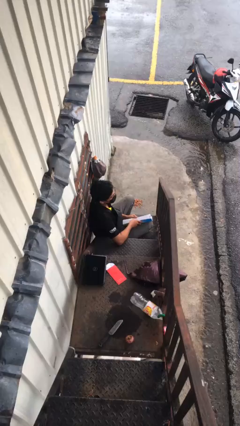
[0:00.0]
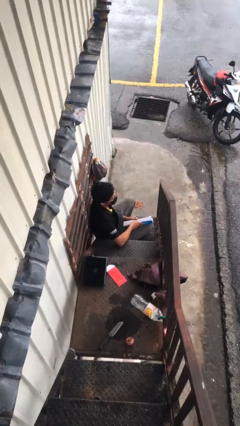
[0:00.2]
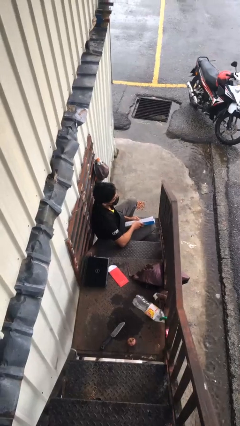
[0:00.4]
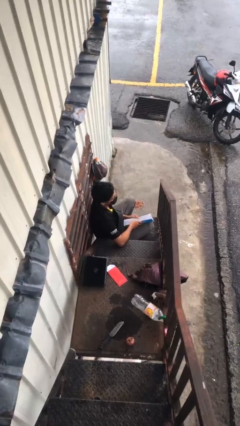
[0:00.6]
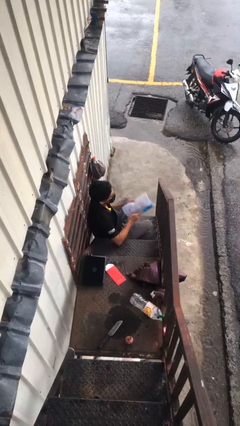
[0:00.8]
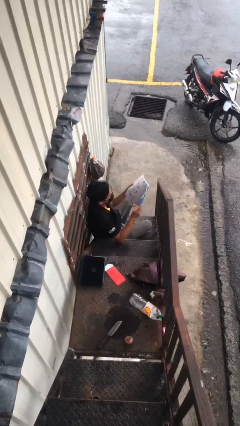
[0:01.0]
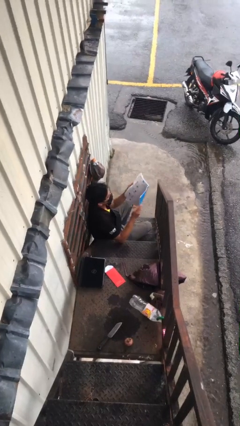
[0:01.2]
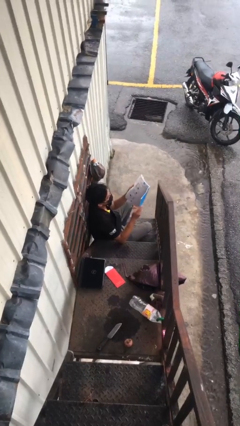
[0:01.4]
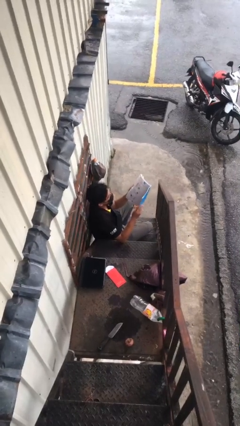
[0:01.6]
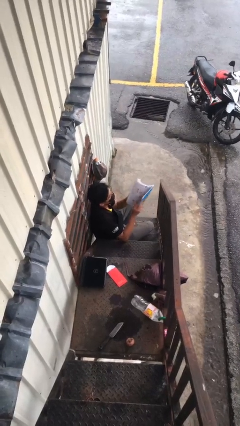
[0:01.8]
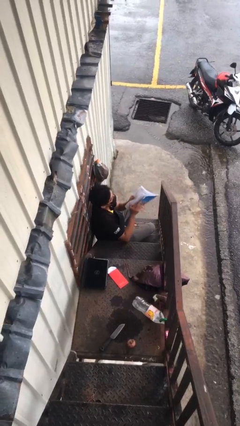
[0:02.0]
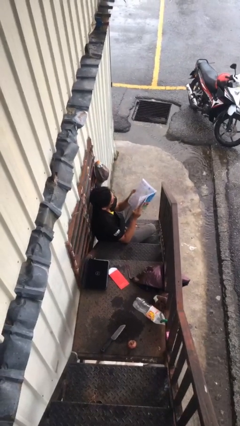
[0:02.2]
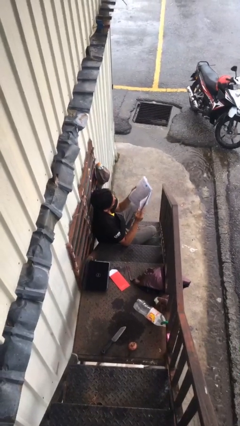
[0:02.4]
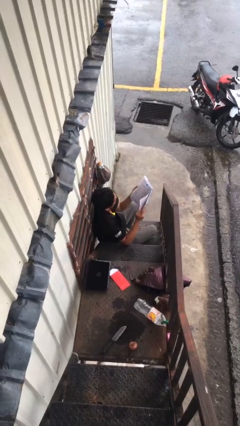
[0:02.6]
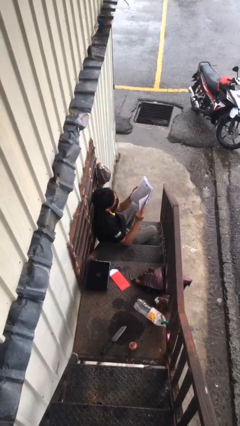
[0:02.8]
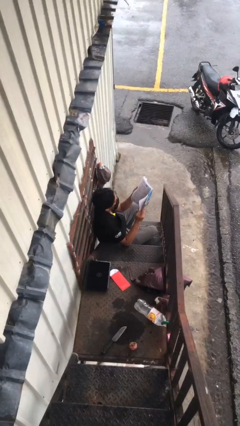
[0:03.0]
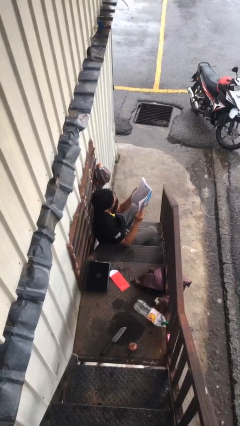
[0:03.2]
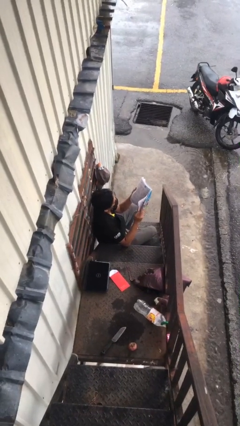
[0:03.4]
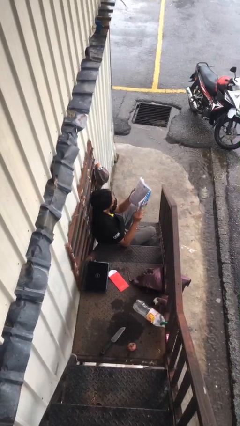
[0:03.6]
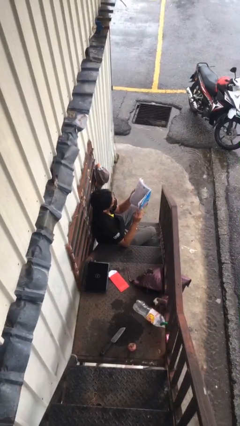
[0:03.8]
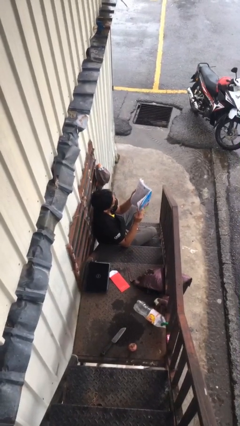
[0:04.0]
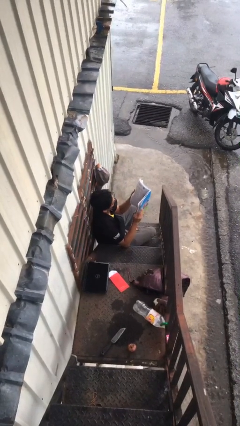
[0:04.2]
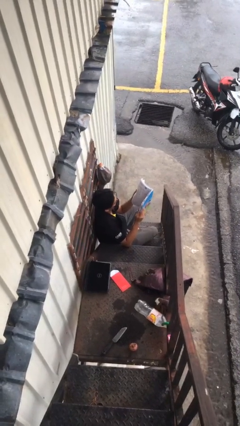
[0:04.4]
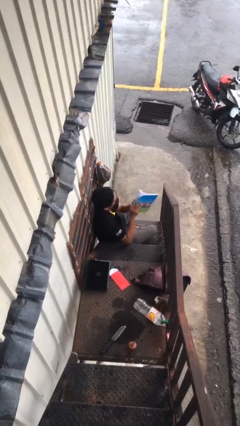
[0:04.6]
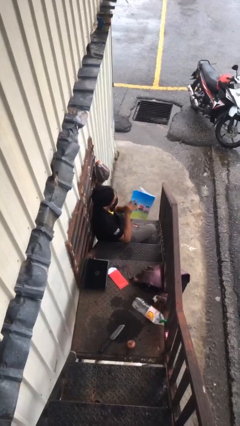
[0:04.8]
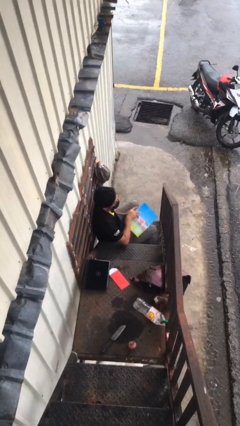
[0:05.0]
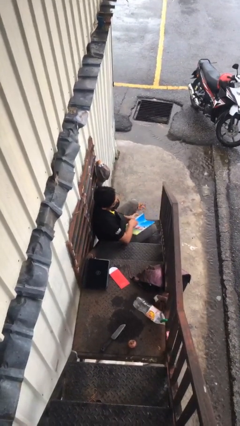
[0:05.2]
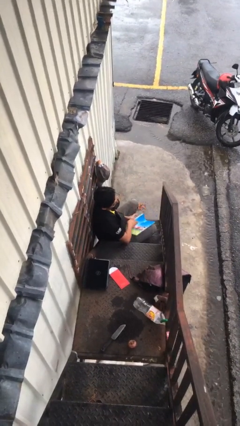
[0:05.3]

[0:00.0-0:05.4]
person reads document

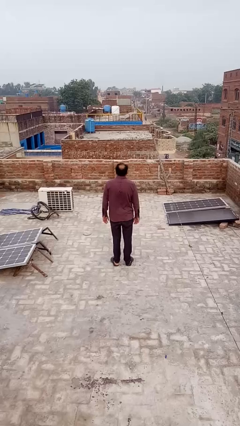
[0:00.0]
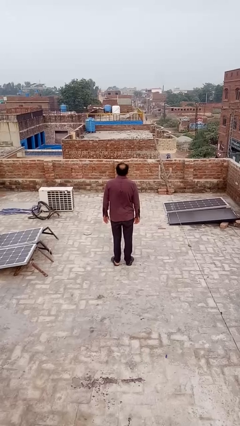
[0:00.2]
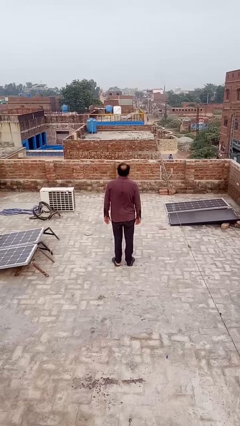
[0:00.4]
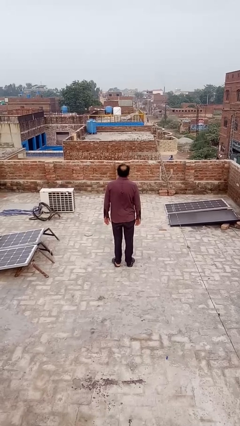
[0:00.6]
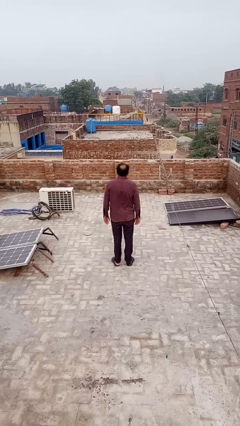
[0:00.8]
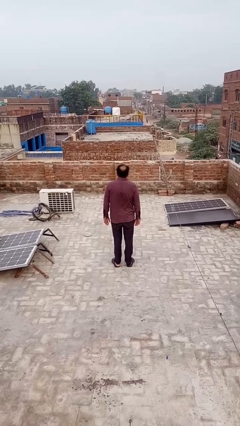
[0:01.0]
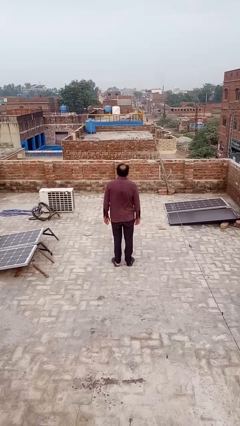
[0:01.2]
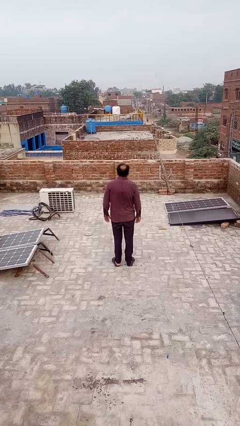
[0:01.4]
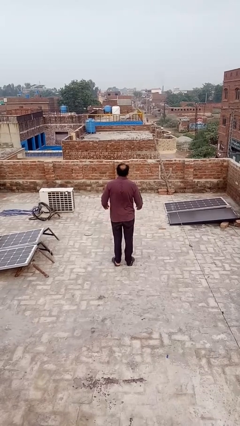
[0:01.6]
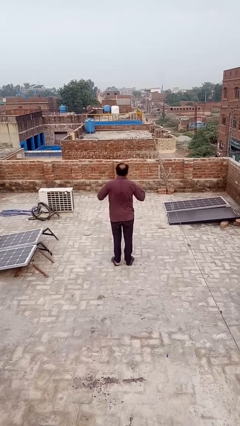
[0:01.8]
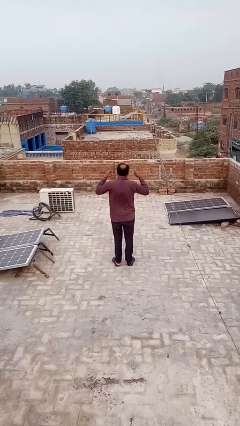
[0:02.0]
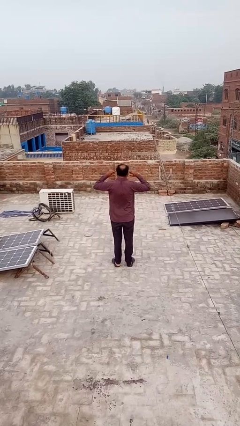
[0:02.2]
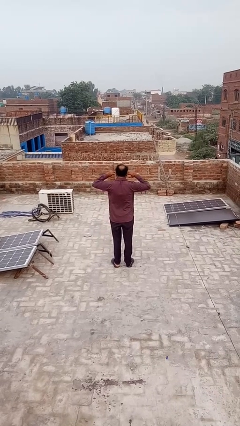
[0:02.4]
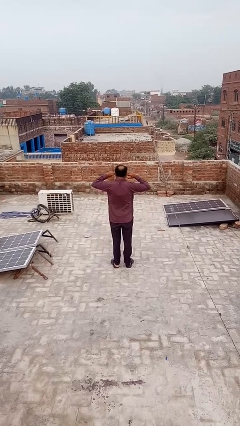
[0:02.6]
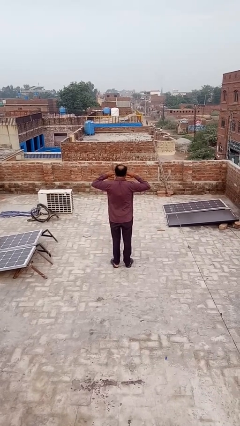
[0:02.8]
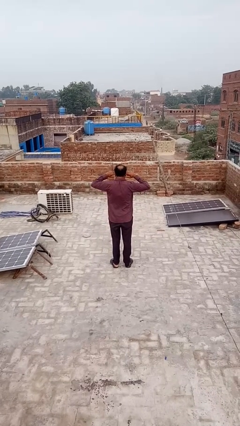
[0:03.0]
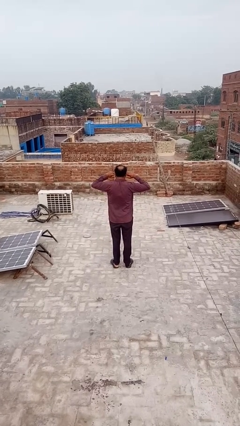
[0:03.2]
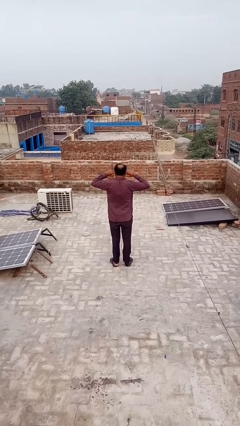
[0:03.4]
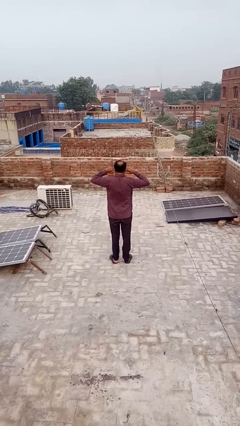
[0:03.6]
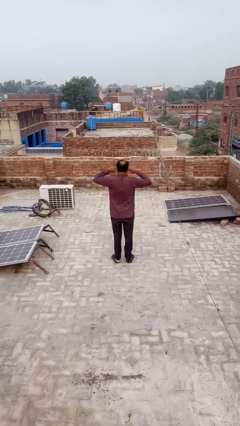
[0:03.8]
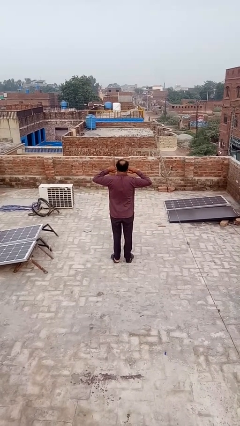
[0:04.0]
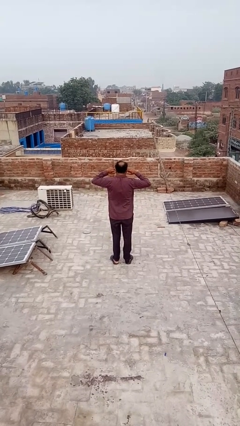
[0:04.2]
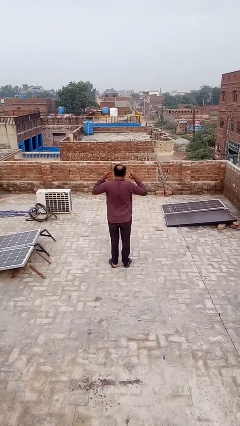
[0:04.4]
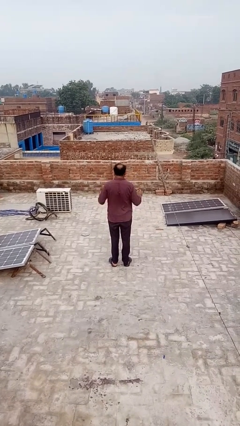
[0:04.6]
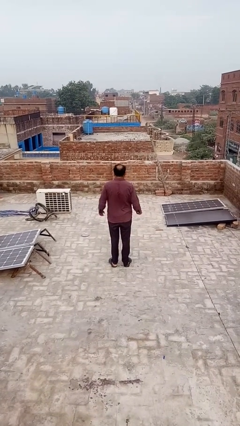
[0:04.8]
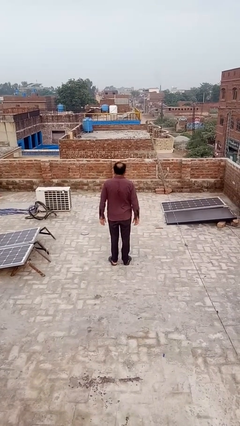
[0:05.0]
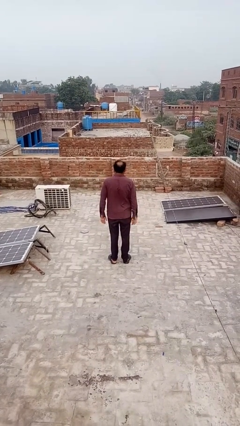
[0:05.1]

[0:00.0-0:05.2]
person puts fingers in ear

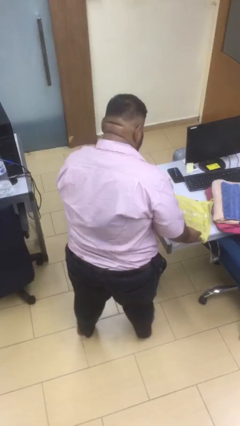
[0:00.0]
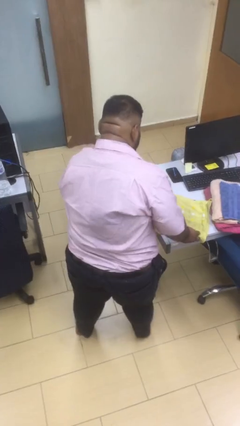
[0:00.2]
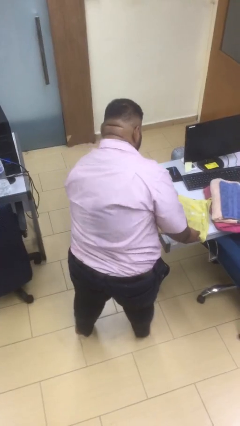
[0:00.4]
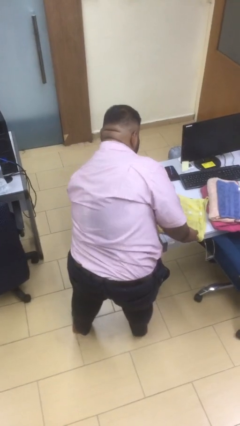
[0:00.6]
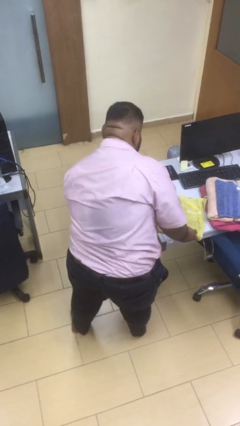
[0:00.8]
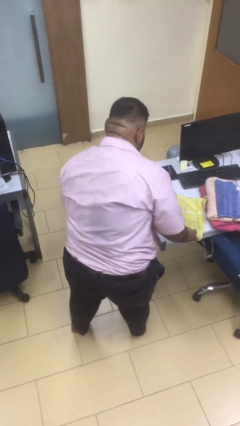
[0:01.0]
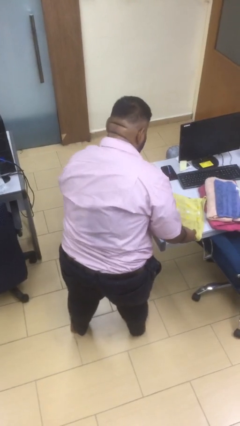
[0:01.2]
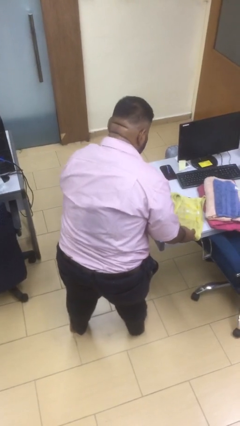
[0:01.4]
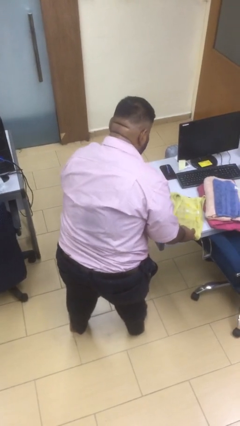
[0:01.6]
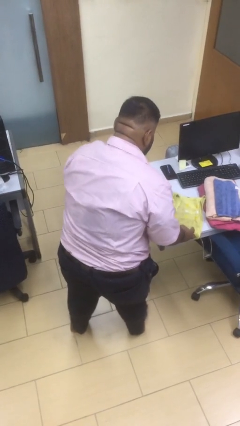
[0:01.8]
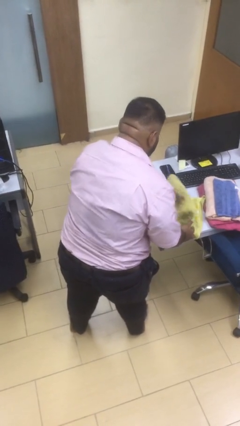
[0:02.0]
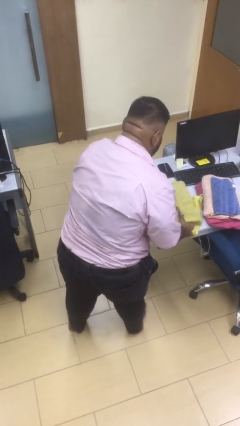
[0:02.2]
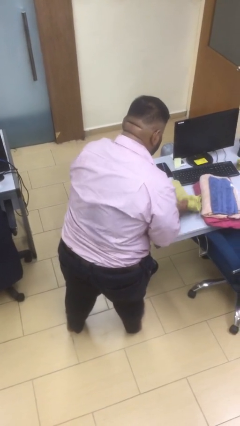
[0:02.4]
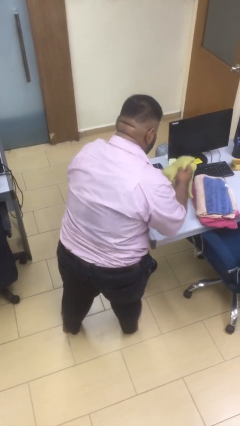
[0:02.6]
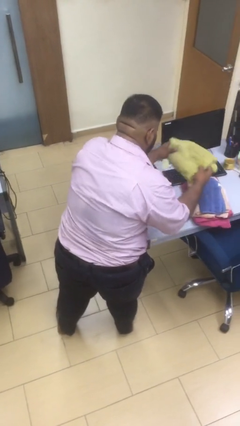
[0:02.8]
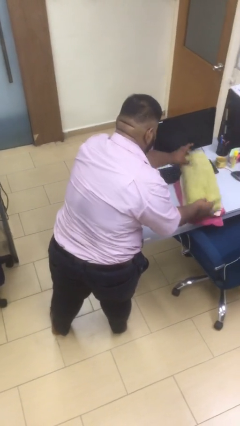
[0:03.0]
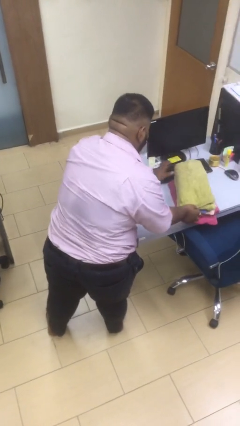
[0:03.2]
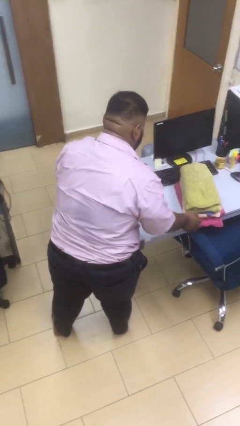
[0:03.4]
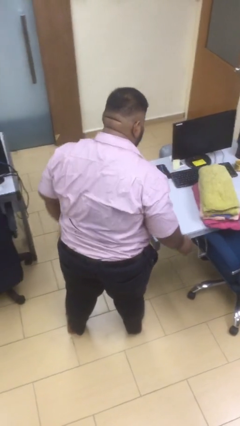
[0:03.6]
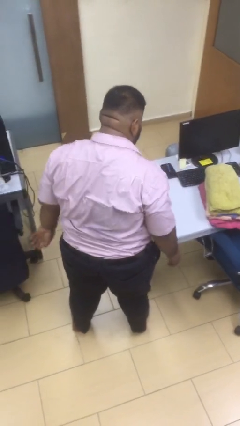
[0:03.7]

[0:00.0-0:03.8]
person folds towel

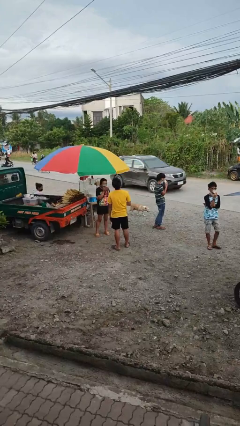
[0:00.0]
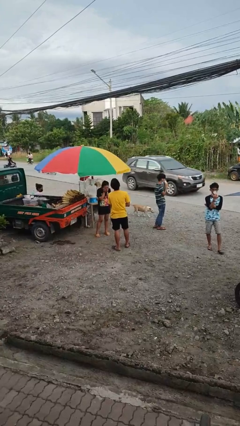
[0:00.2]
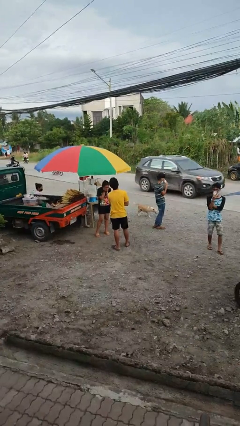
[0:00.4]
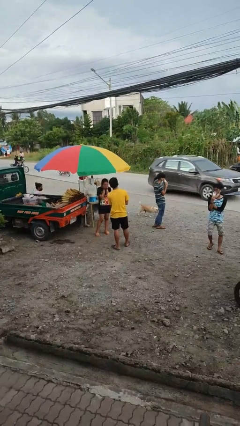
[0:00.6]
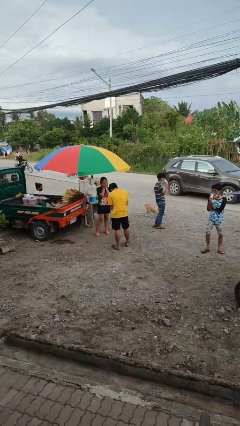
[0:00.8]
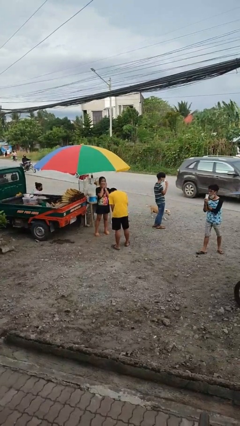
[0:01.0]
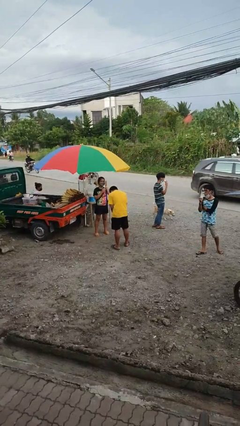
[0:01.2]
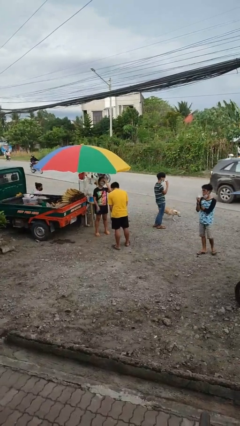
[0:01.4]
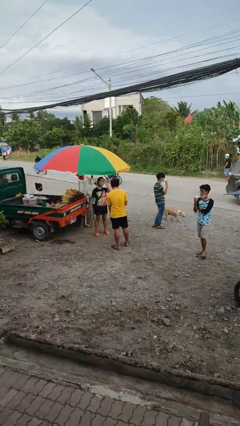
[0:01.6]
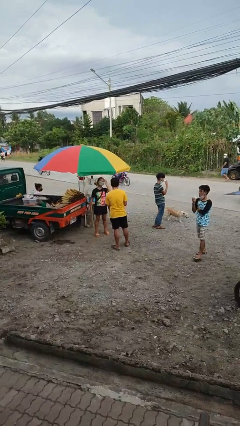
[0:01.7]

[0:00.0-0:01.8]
person laughs with person

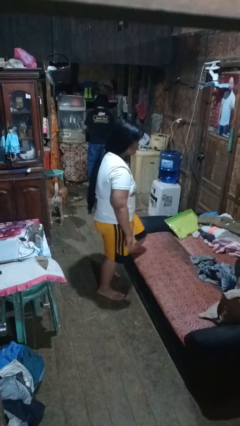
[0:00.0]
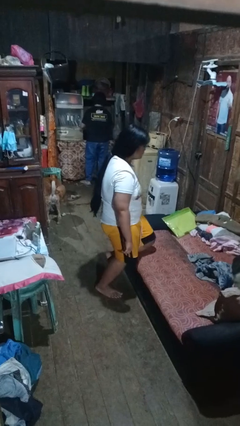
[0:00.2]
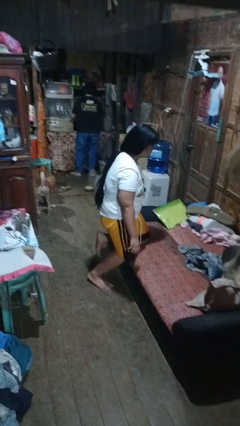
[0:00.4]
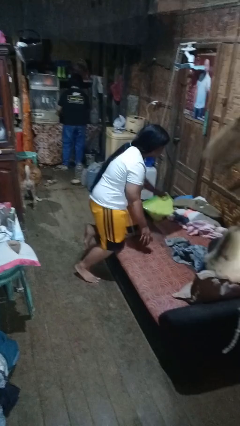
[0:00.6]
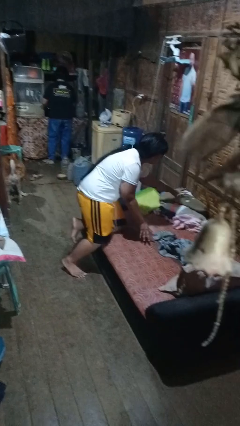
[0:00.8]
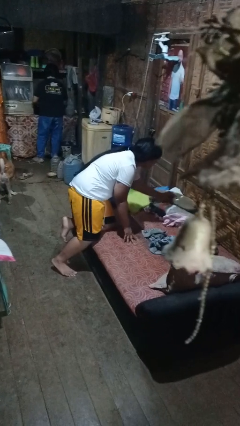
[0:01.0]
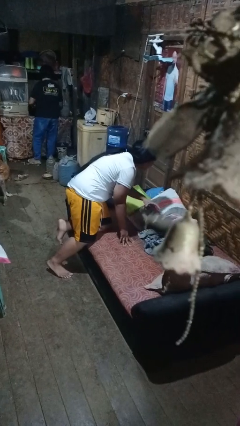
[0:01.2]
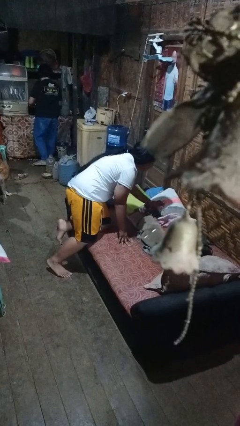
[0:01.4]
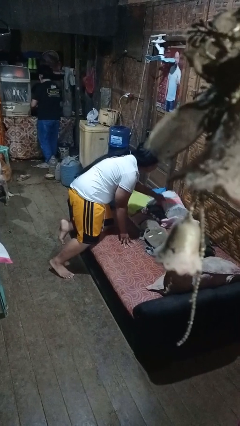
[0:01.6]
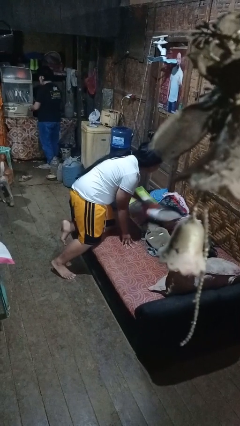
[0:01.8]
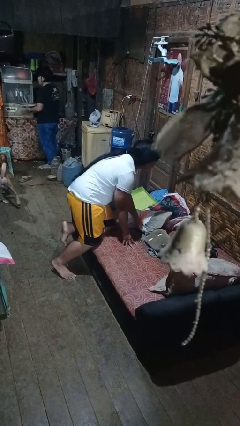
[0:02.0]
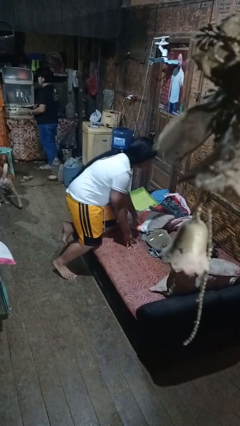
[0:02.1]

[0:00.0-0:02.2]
person searches in couch
